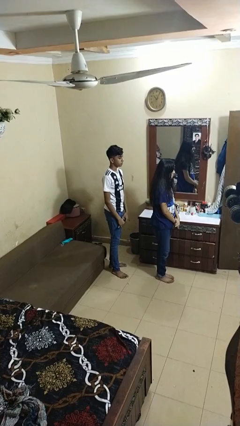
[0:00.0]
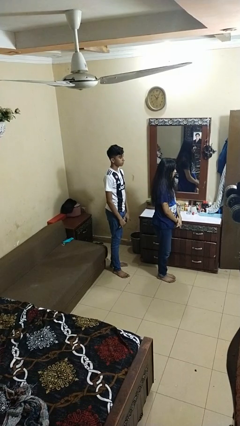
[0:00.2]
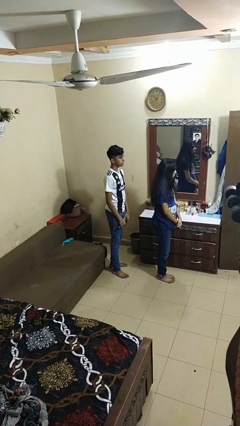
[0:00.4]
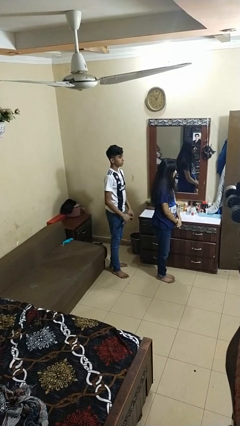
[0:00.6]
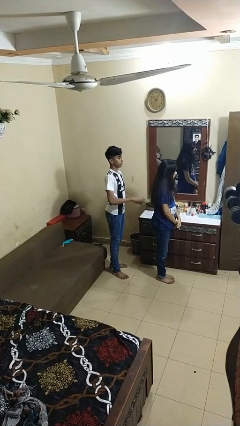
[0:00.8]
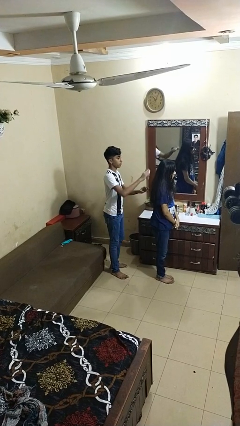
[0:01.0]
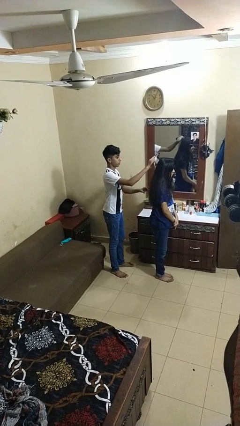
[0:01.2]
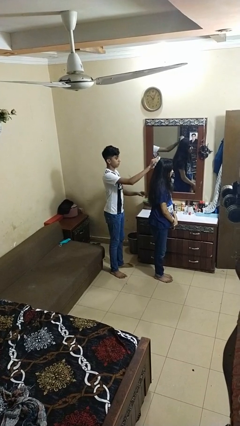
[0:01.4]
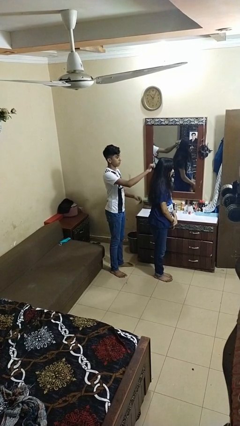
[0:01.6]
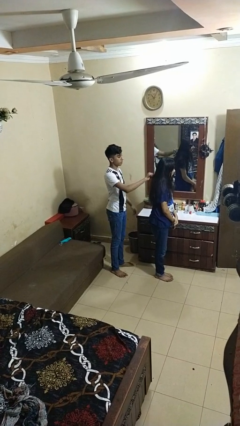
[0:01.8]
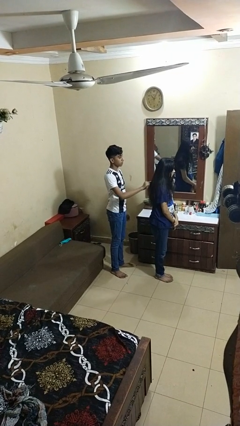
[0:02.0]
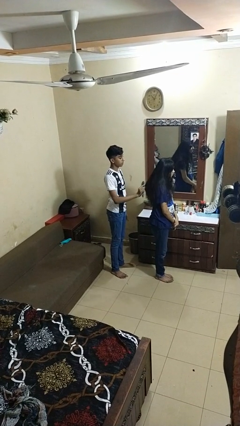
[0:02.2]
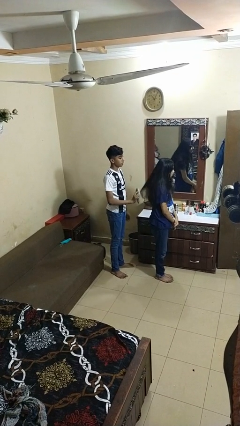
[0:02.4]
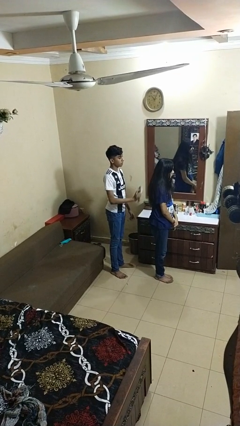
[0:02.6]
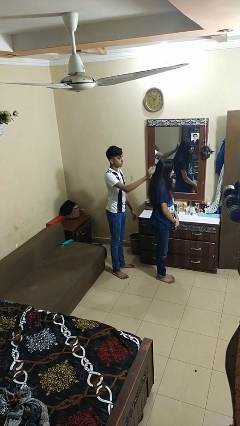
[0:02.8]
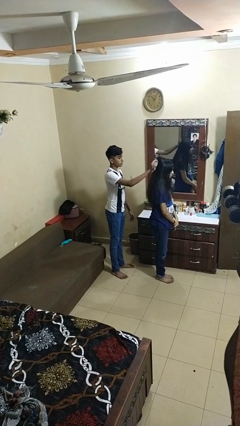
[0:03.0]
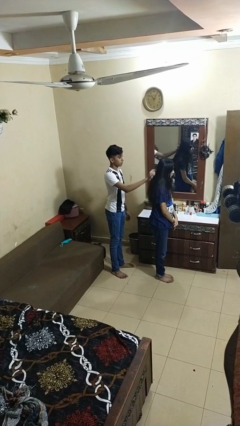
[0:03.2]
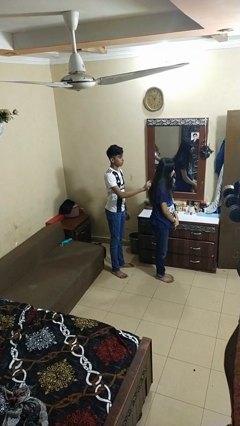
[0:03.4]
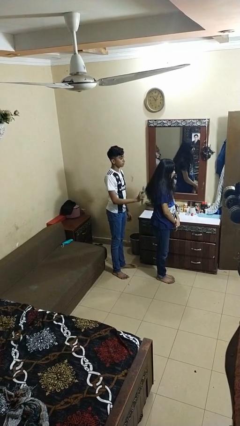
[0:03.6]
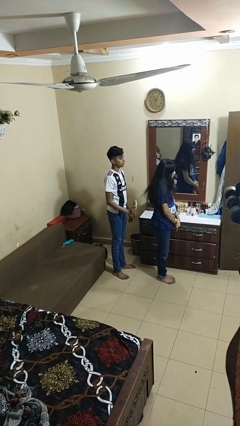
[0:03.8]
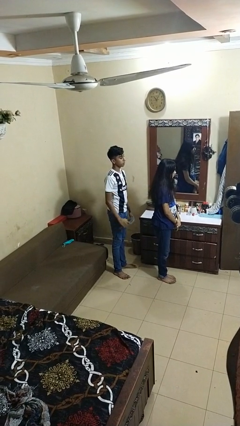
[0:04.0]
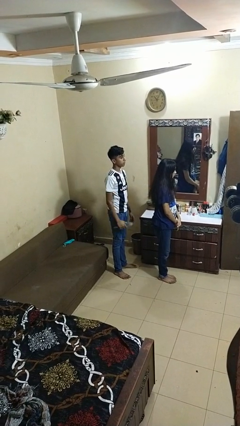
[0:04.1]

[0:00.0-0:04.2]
person brushes hair of person

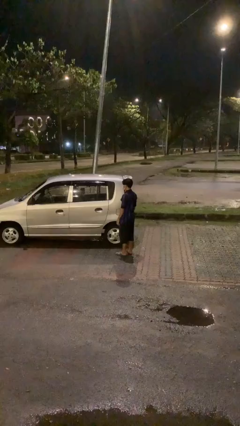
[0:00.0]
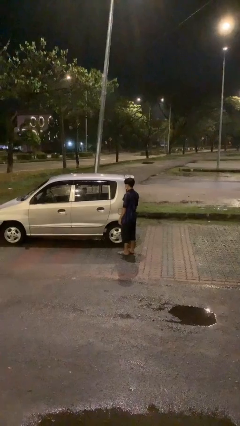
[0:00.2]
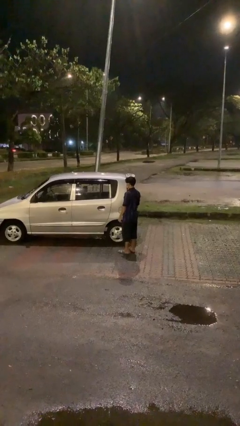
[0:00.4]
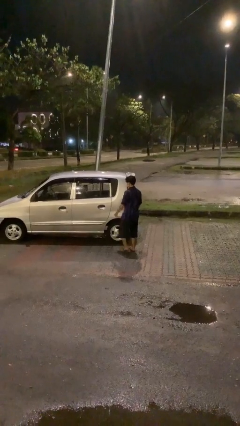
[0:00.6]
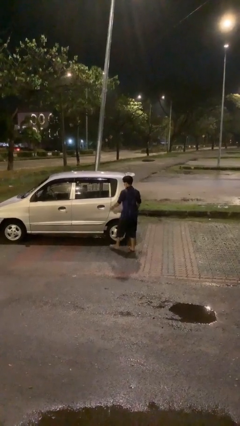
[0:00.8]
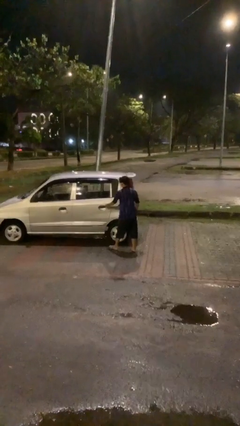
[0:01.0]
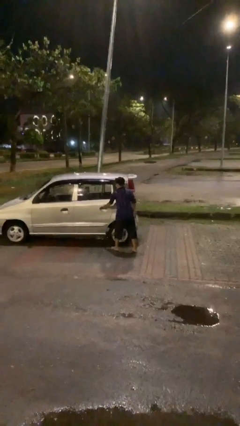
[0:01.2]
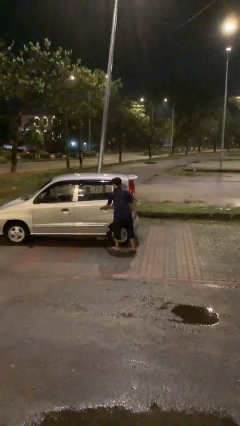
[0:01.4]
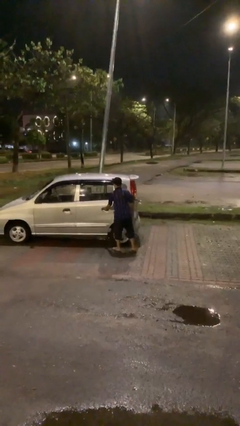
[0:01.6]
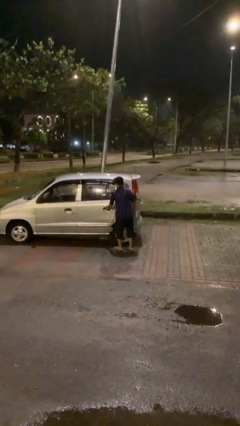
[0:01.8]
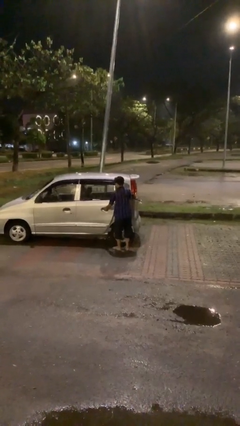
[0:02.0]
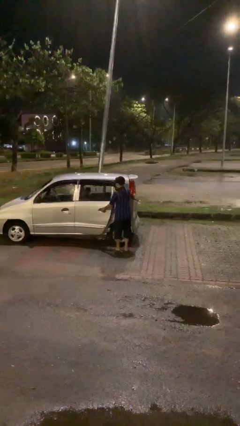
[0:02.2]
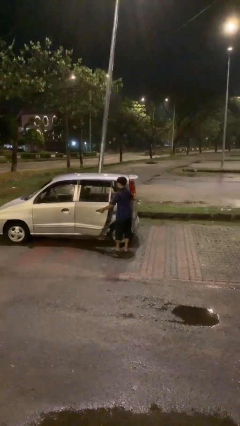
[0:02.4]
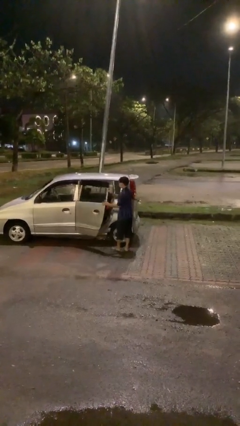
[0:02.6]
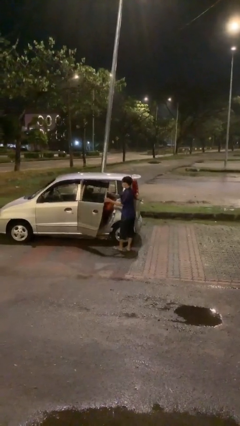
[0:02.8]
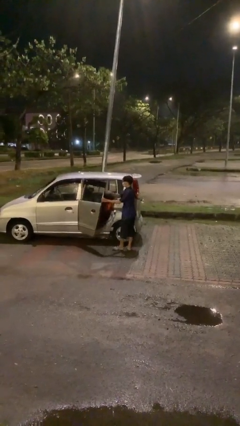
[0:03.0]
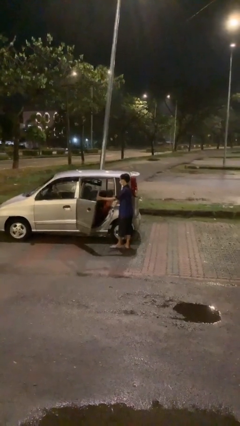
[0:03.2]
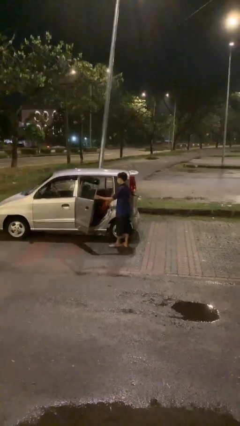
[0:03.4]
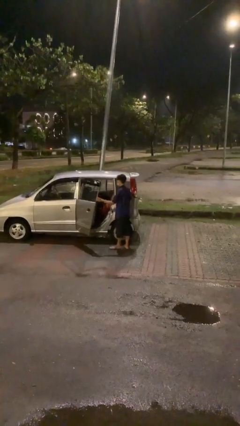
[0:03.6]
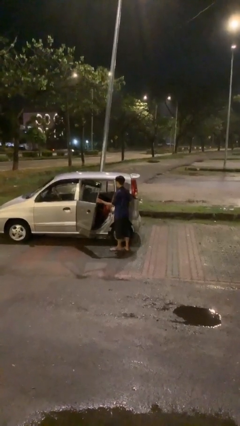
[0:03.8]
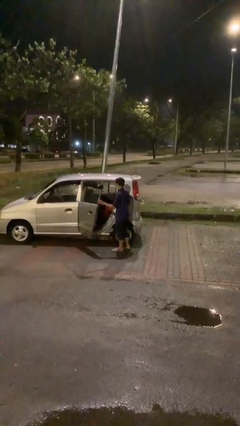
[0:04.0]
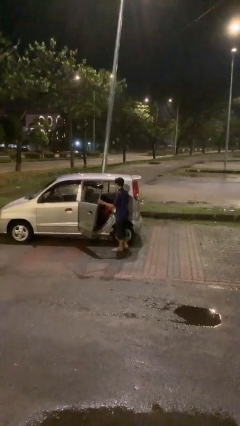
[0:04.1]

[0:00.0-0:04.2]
person opens car door

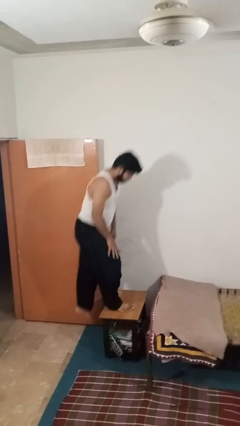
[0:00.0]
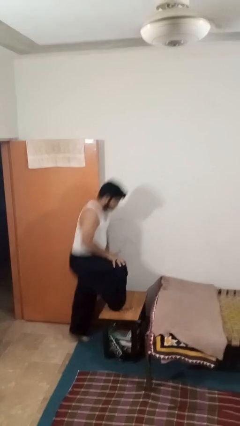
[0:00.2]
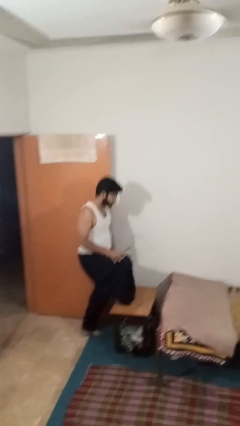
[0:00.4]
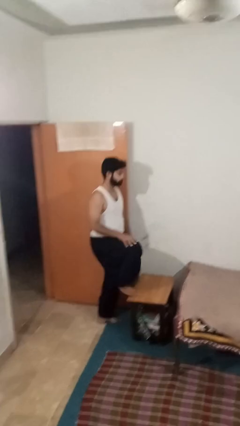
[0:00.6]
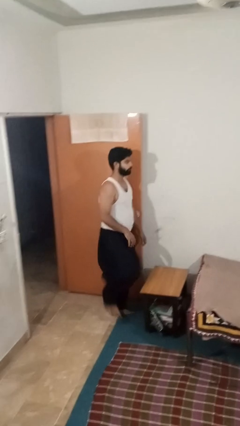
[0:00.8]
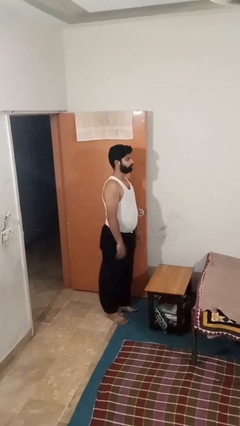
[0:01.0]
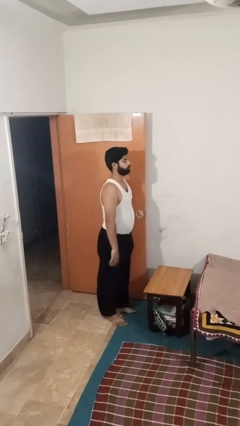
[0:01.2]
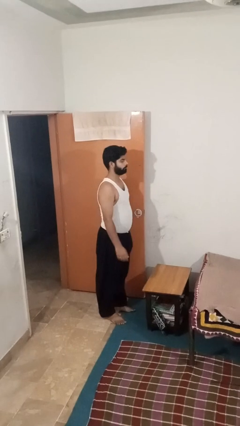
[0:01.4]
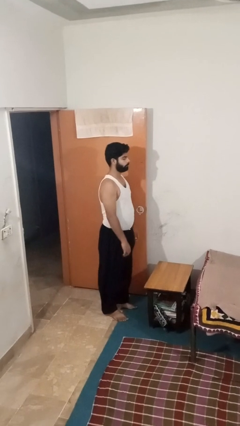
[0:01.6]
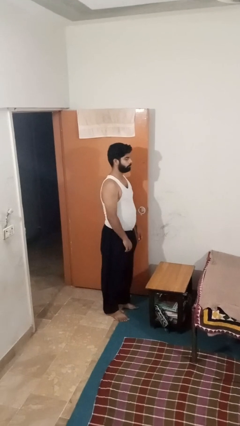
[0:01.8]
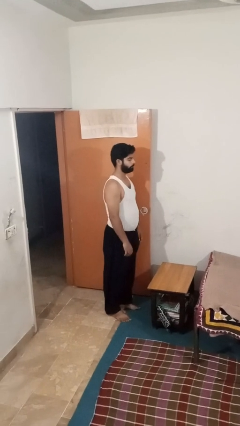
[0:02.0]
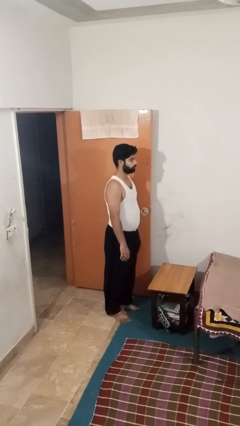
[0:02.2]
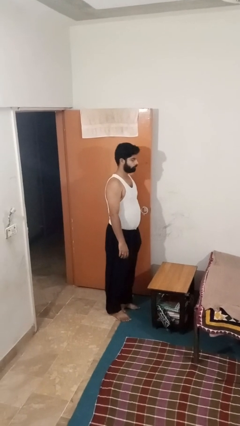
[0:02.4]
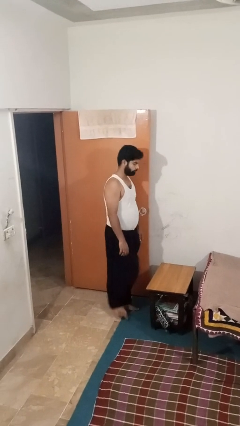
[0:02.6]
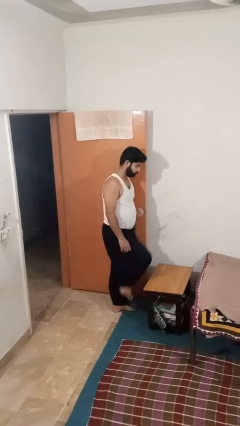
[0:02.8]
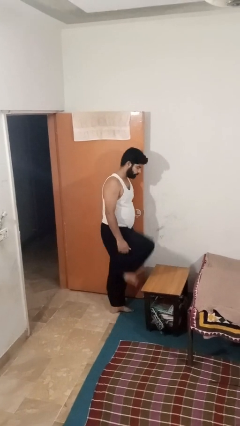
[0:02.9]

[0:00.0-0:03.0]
person climbs off table

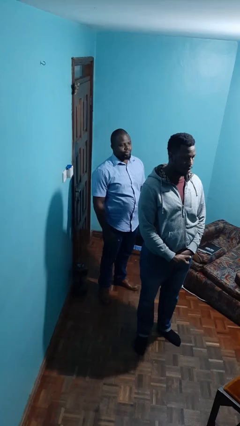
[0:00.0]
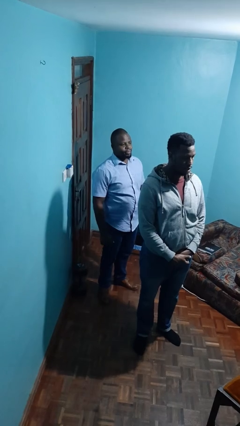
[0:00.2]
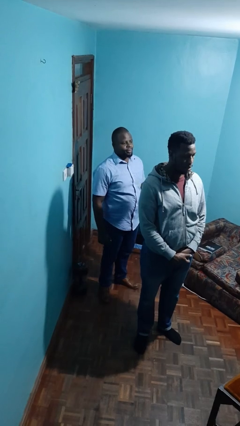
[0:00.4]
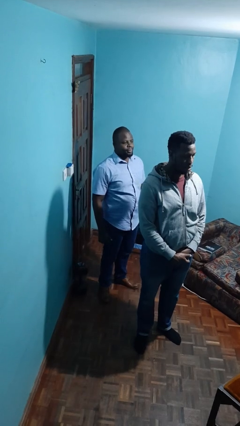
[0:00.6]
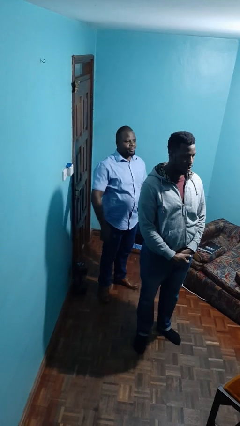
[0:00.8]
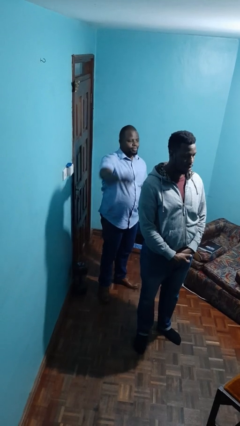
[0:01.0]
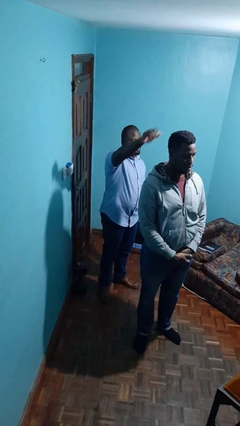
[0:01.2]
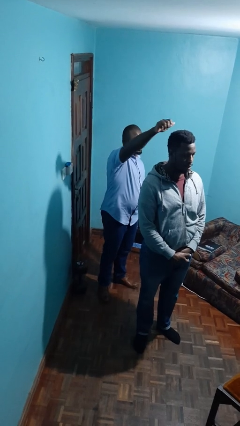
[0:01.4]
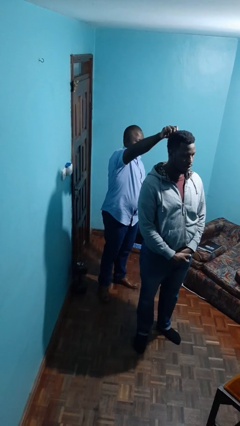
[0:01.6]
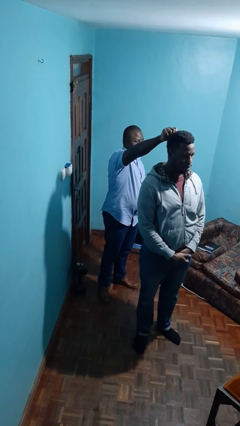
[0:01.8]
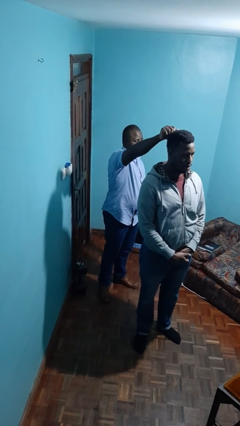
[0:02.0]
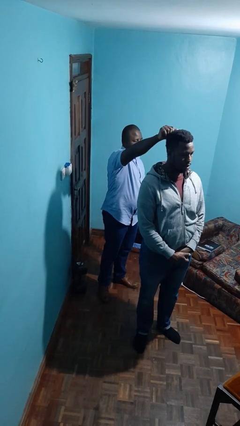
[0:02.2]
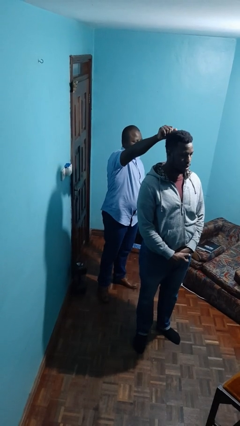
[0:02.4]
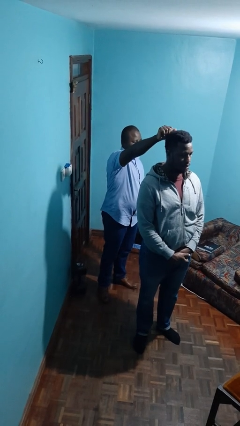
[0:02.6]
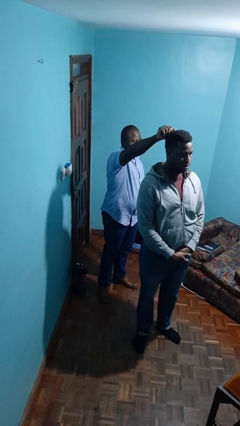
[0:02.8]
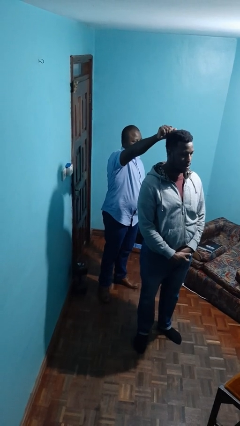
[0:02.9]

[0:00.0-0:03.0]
person grabs person by hair

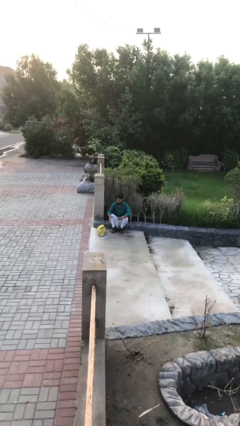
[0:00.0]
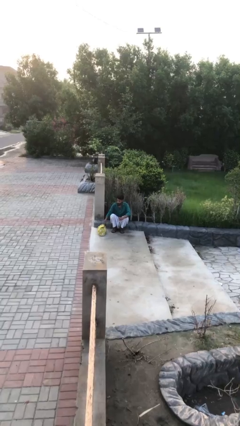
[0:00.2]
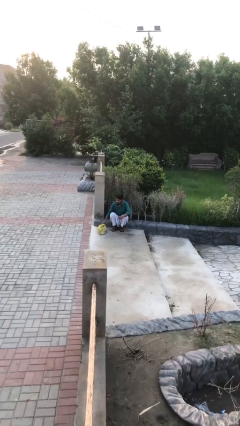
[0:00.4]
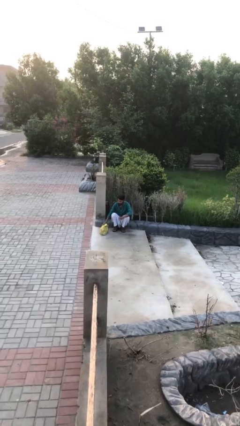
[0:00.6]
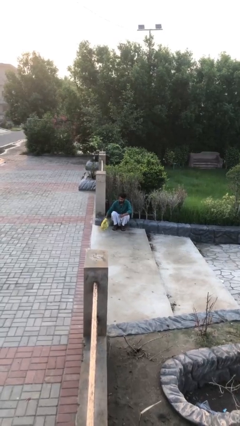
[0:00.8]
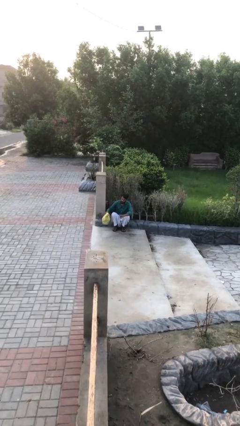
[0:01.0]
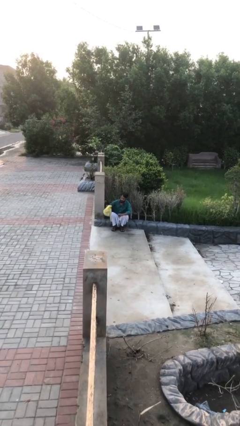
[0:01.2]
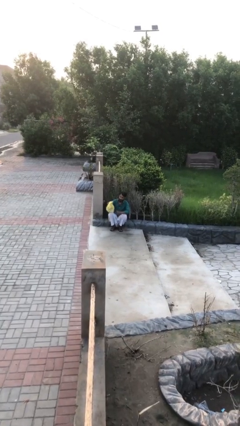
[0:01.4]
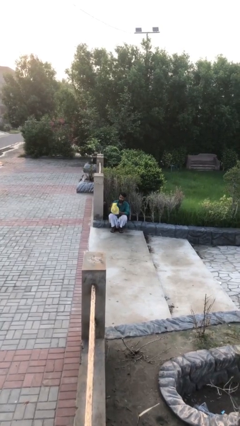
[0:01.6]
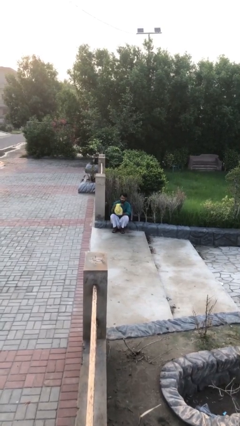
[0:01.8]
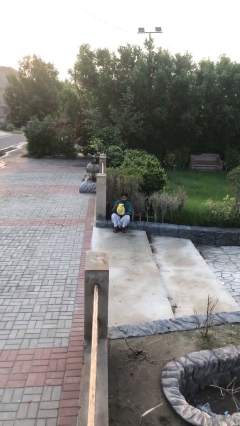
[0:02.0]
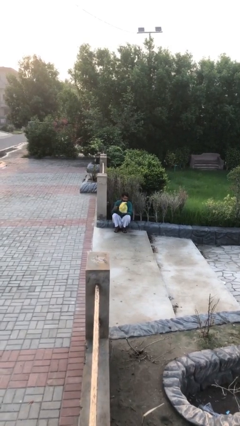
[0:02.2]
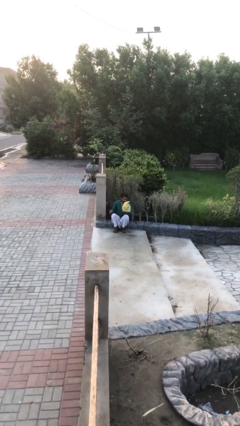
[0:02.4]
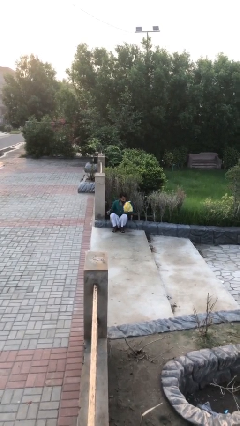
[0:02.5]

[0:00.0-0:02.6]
person picks up object from floor

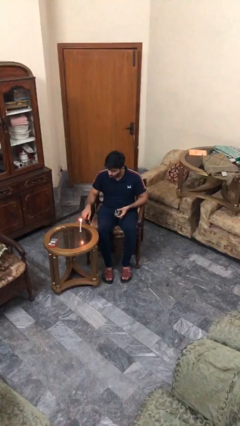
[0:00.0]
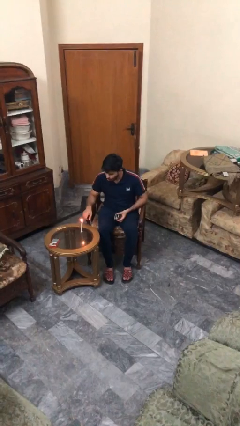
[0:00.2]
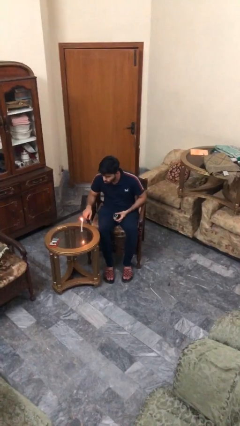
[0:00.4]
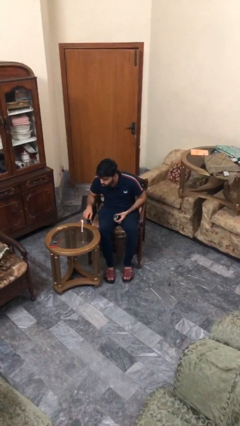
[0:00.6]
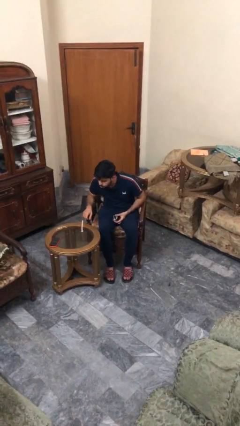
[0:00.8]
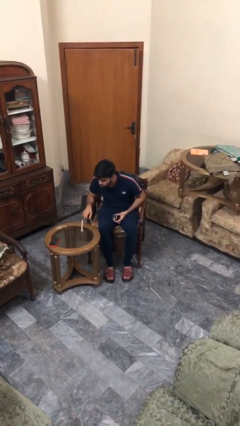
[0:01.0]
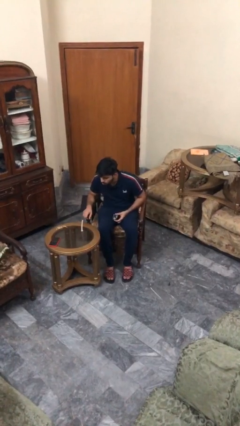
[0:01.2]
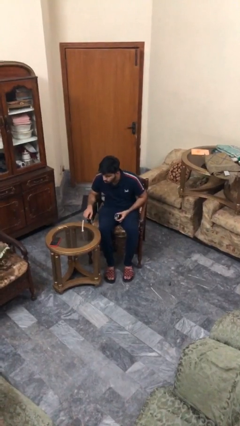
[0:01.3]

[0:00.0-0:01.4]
person extinguishes candle
